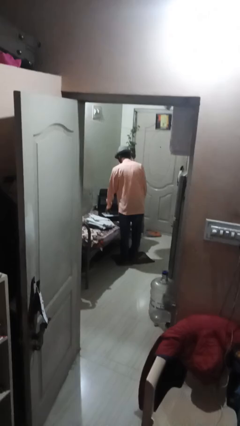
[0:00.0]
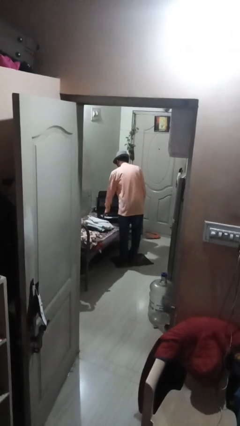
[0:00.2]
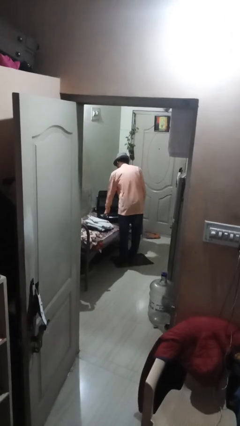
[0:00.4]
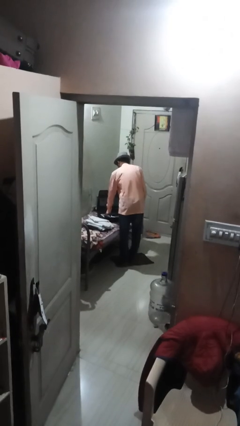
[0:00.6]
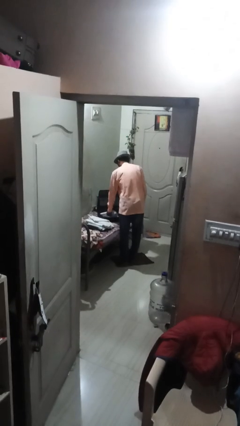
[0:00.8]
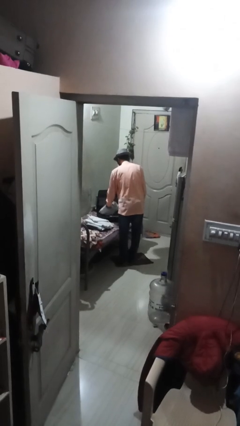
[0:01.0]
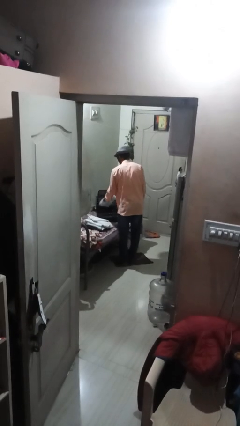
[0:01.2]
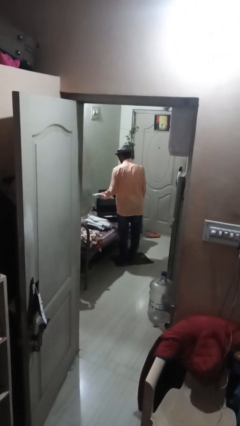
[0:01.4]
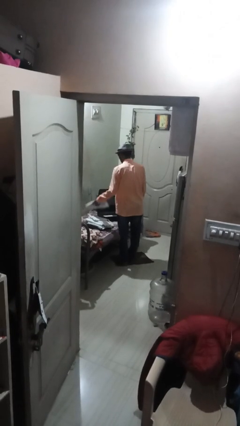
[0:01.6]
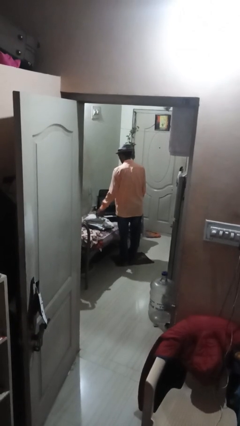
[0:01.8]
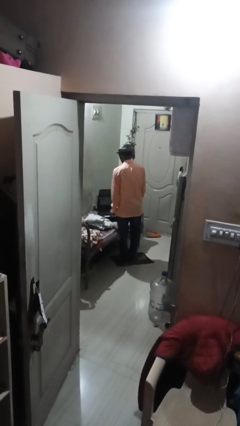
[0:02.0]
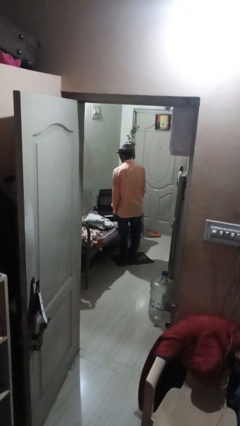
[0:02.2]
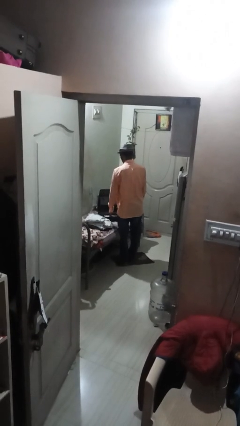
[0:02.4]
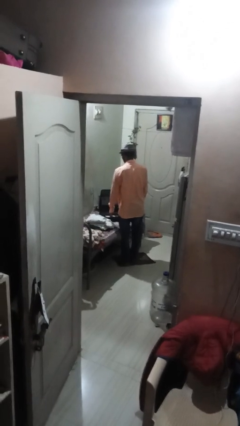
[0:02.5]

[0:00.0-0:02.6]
person unloads clothes from suitcase

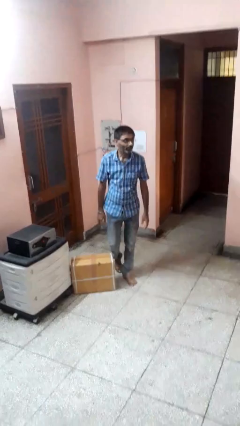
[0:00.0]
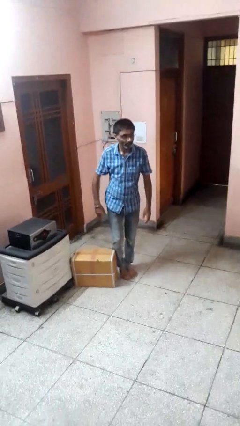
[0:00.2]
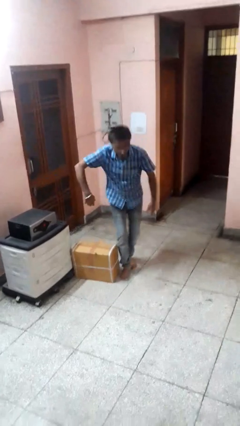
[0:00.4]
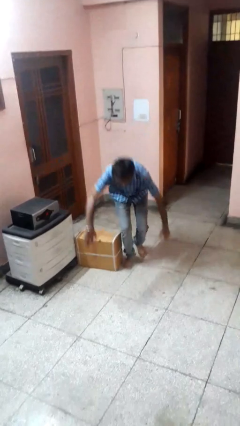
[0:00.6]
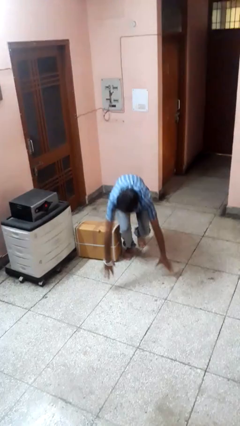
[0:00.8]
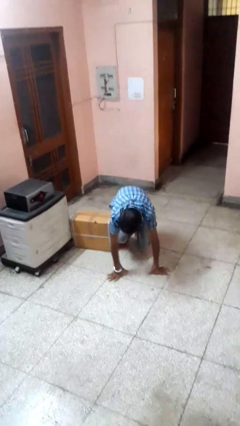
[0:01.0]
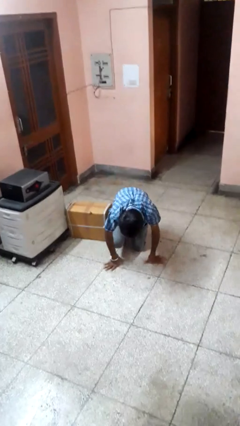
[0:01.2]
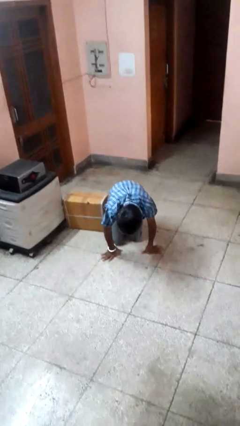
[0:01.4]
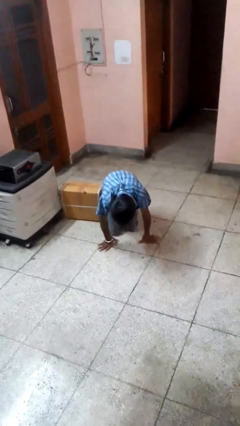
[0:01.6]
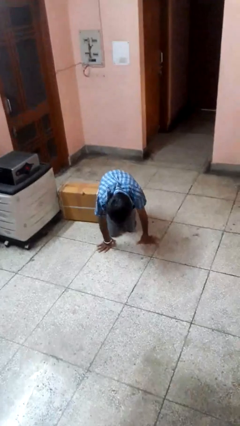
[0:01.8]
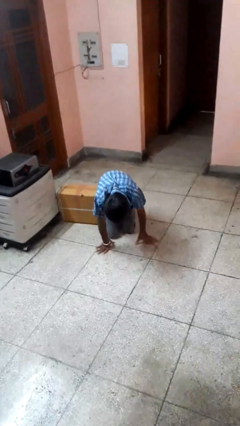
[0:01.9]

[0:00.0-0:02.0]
person trips on object on floor

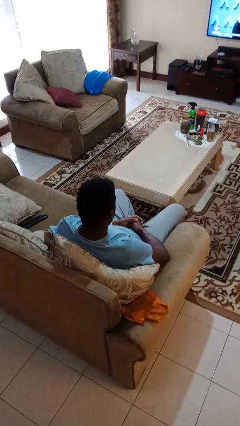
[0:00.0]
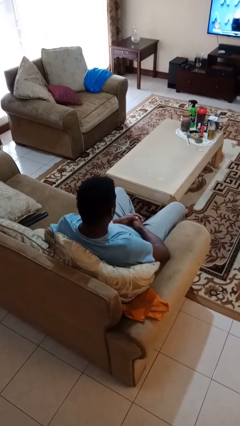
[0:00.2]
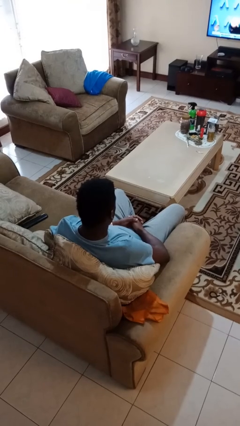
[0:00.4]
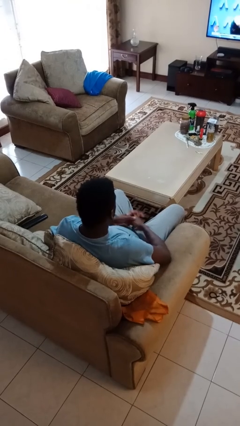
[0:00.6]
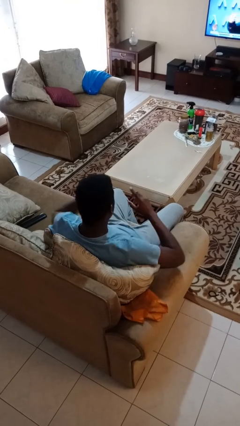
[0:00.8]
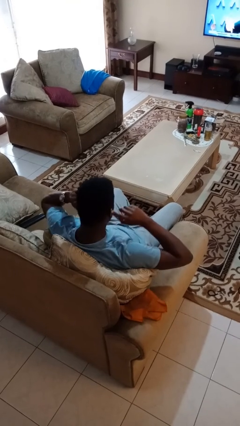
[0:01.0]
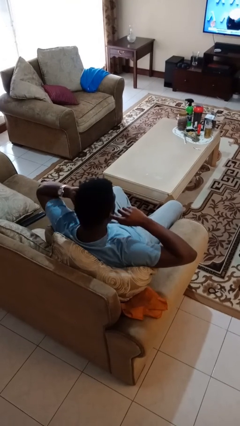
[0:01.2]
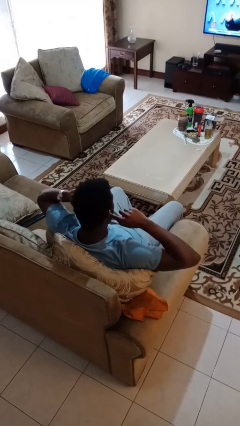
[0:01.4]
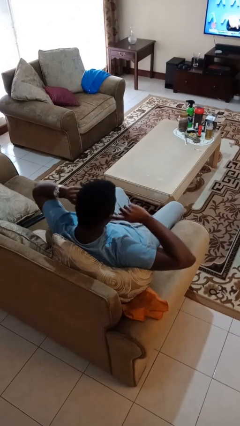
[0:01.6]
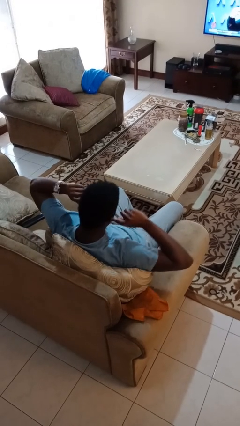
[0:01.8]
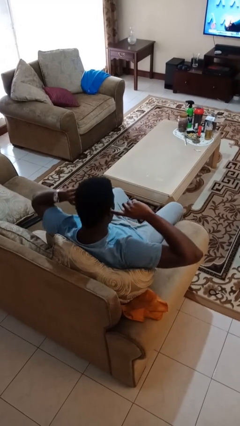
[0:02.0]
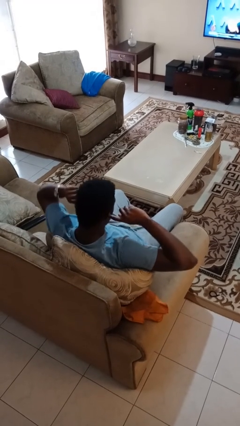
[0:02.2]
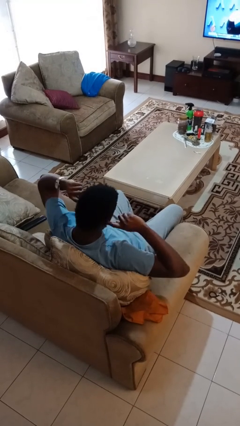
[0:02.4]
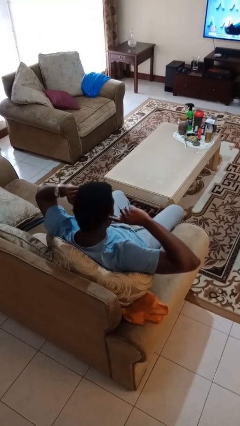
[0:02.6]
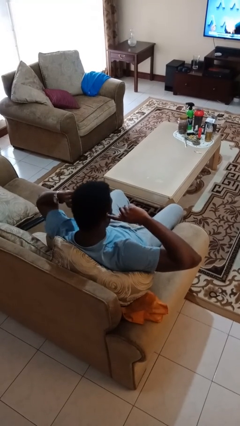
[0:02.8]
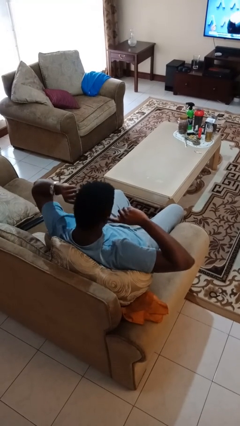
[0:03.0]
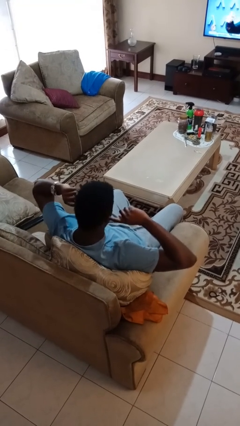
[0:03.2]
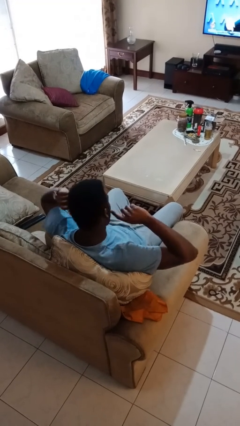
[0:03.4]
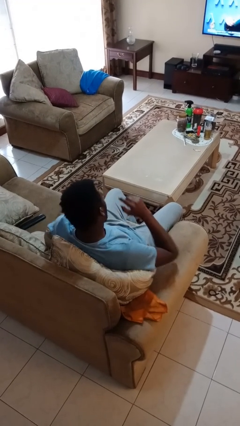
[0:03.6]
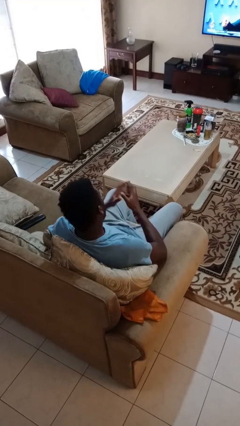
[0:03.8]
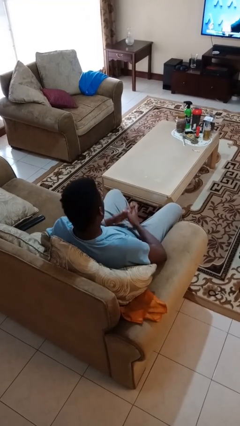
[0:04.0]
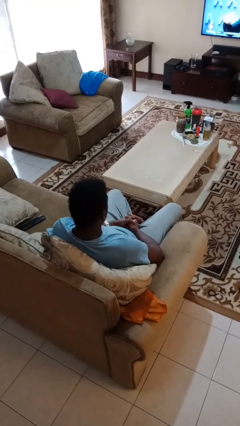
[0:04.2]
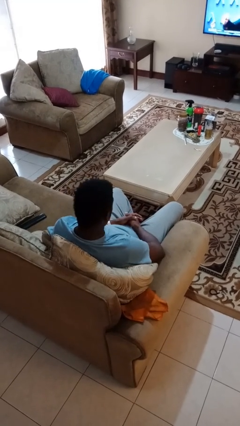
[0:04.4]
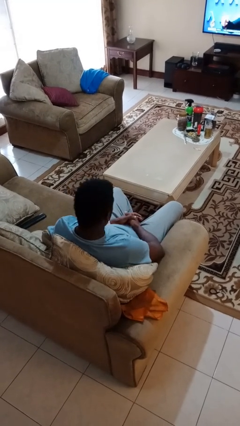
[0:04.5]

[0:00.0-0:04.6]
person puts fingers in ear

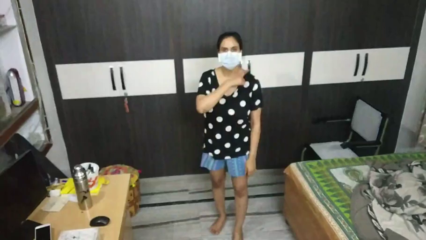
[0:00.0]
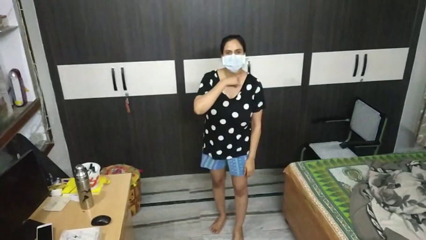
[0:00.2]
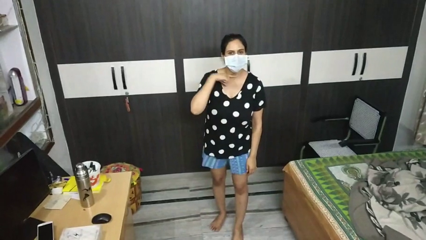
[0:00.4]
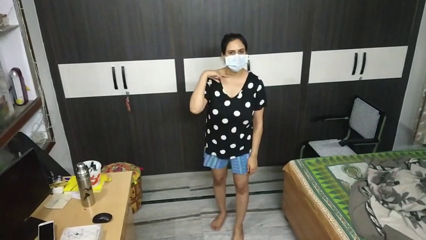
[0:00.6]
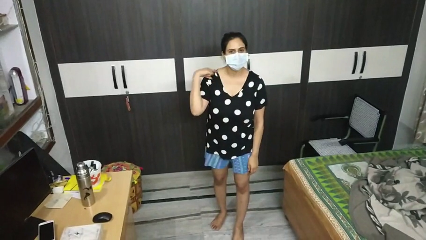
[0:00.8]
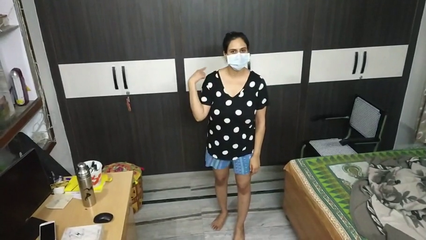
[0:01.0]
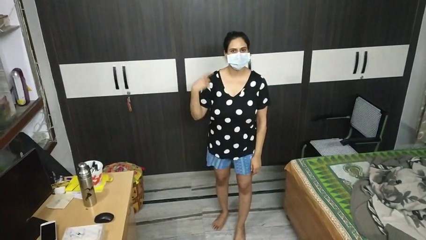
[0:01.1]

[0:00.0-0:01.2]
person gestures cut

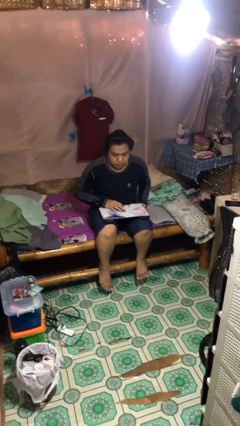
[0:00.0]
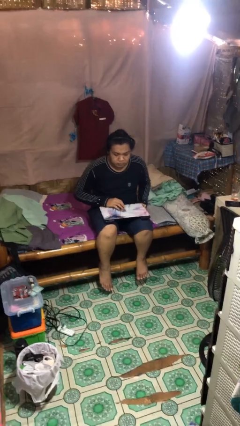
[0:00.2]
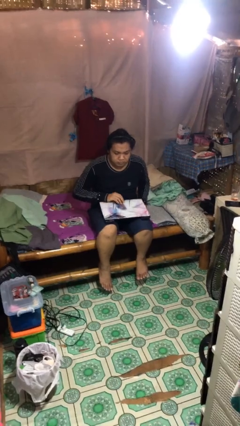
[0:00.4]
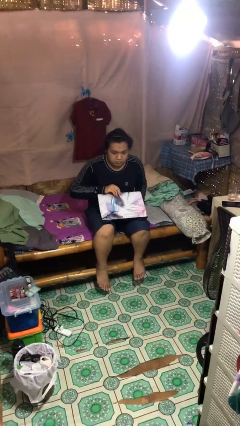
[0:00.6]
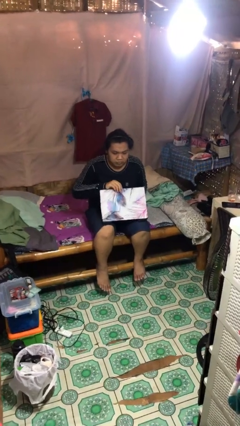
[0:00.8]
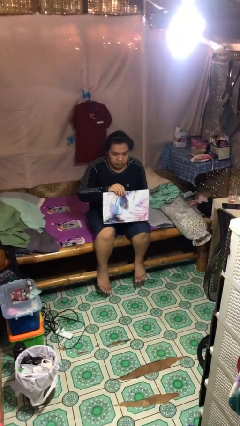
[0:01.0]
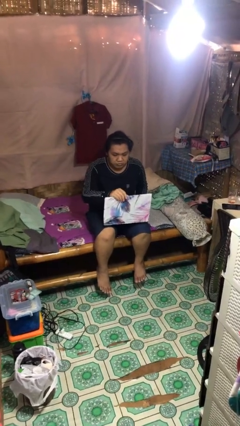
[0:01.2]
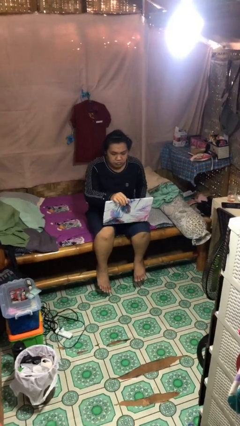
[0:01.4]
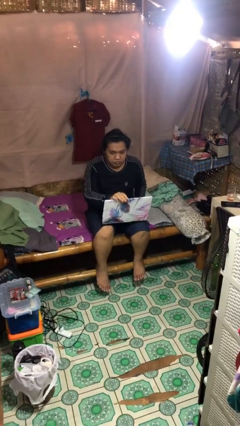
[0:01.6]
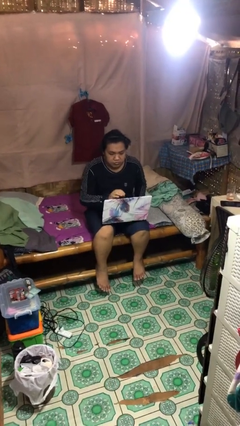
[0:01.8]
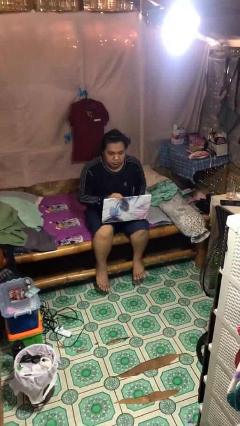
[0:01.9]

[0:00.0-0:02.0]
person opens laptop

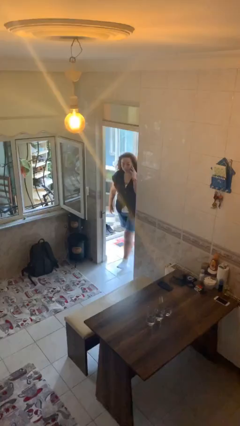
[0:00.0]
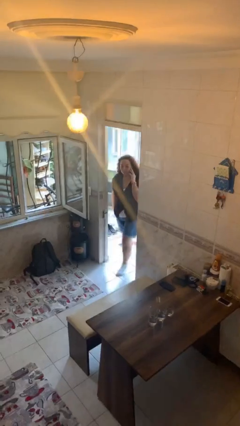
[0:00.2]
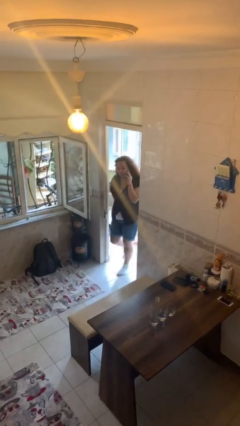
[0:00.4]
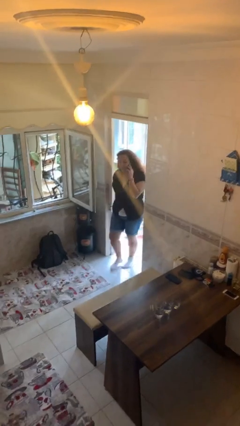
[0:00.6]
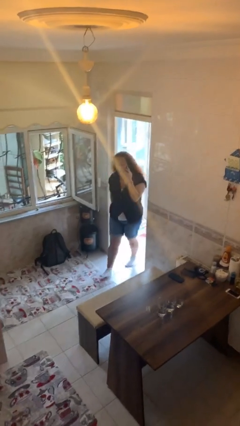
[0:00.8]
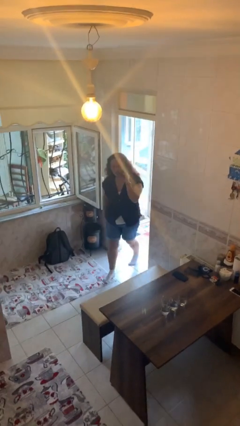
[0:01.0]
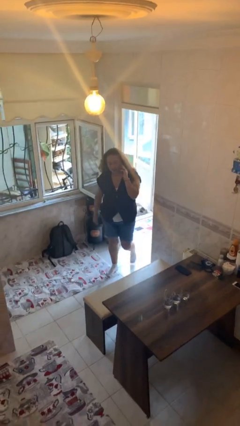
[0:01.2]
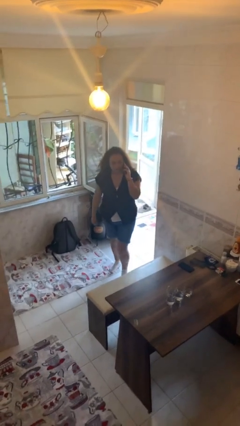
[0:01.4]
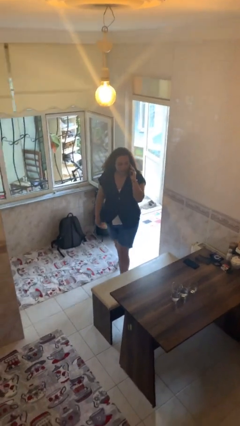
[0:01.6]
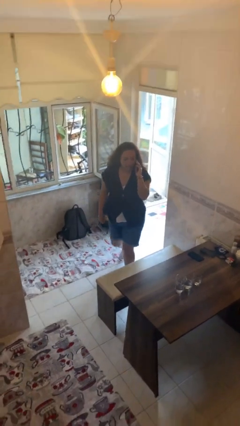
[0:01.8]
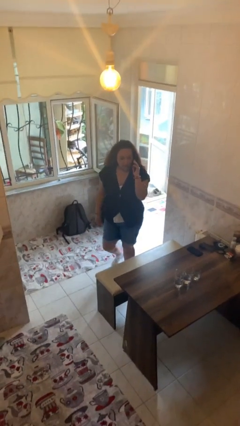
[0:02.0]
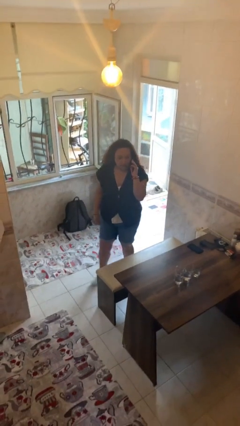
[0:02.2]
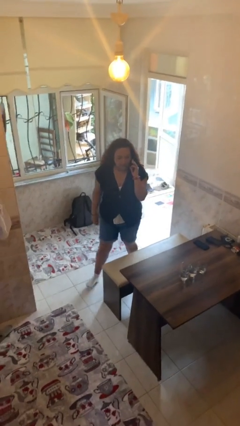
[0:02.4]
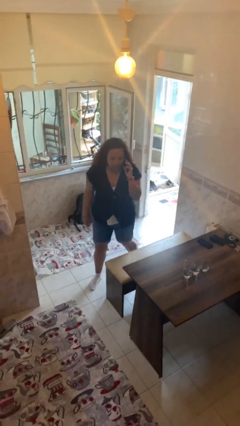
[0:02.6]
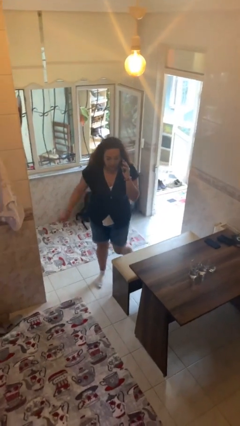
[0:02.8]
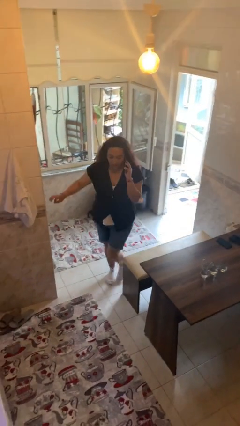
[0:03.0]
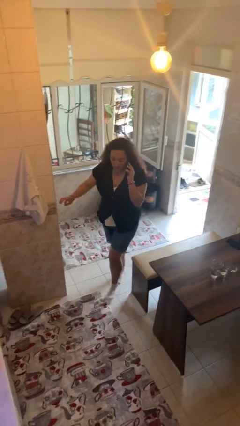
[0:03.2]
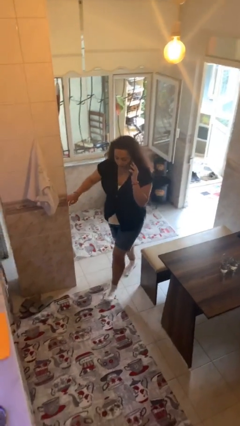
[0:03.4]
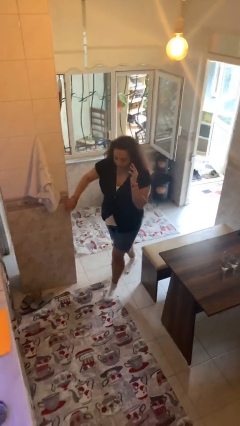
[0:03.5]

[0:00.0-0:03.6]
person enters scene through structure

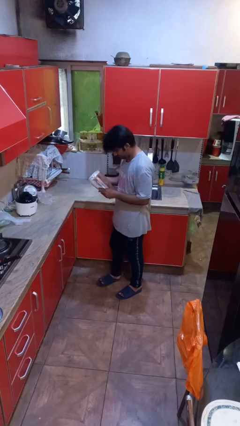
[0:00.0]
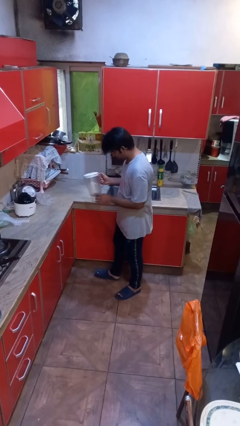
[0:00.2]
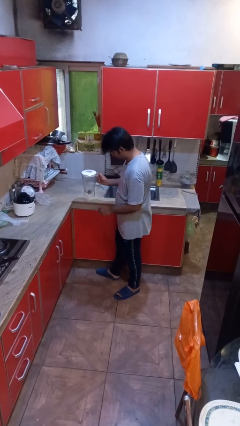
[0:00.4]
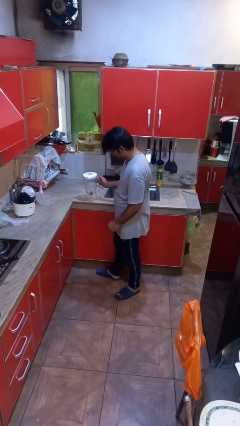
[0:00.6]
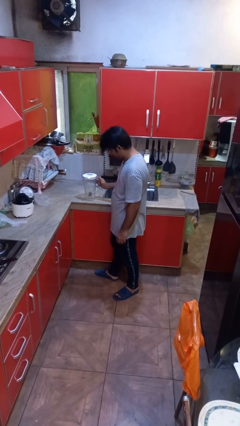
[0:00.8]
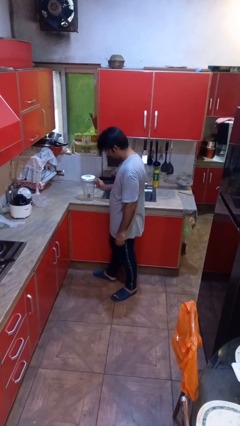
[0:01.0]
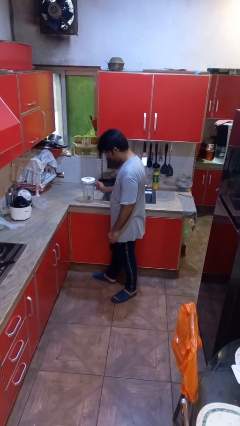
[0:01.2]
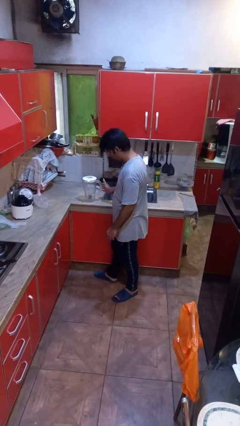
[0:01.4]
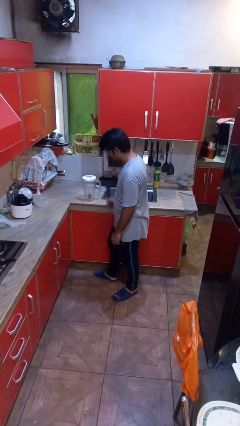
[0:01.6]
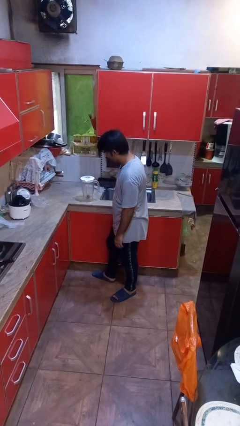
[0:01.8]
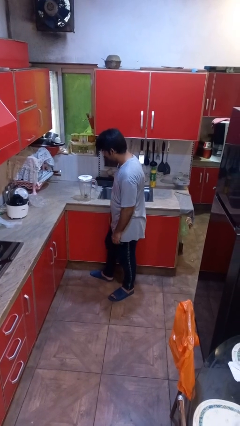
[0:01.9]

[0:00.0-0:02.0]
person puts down object on countertop
